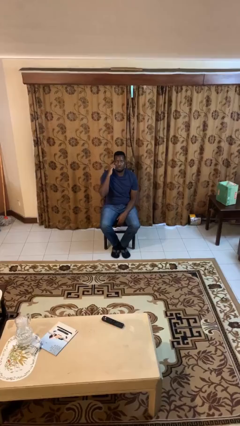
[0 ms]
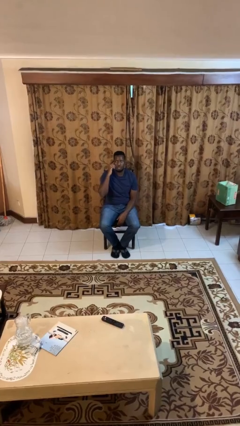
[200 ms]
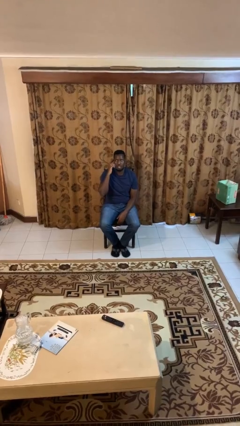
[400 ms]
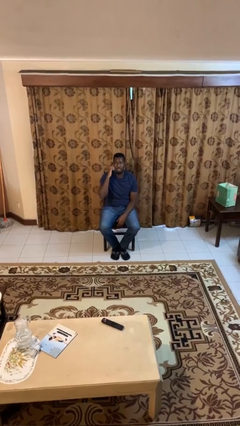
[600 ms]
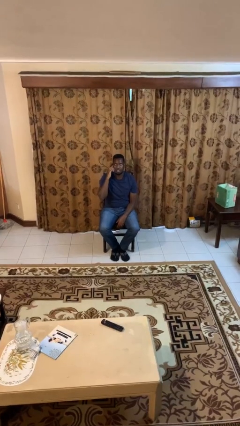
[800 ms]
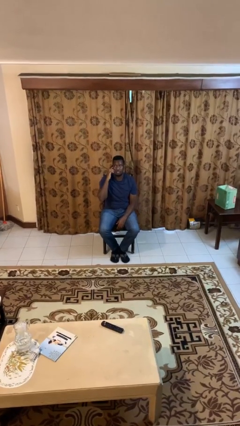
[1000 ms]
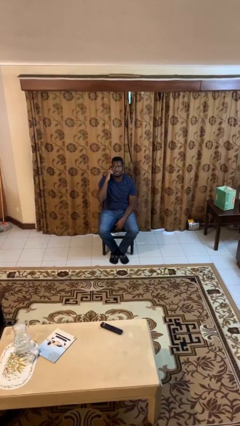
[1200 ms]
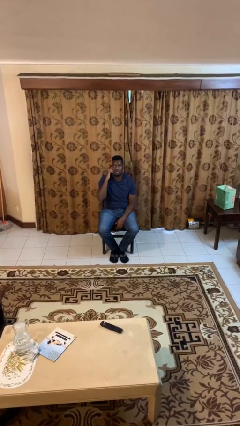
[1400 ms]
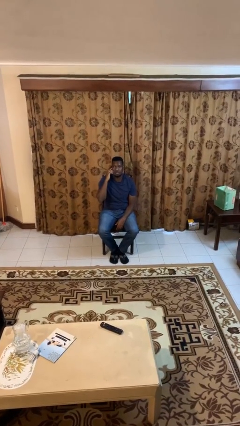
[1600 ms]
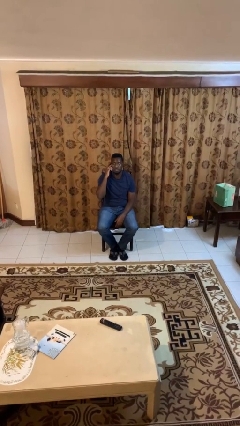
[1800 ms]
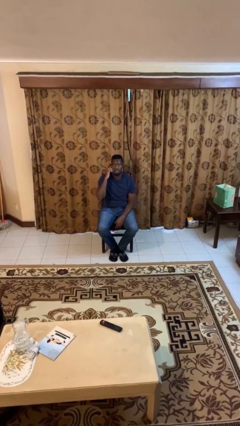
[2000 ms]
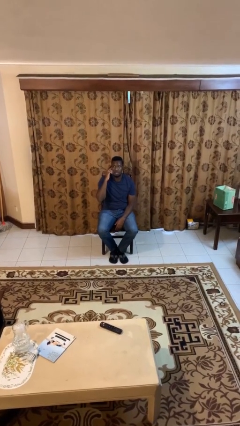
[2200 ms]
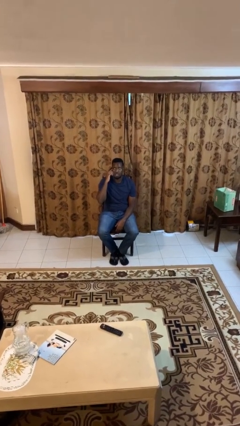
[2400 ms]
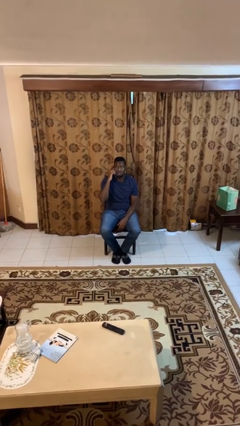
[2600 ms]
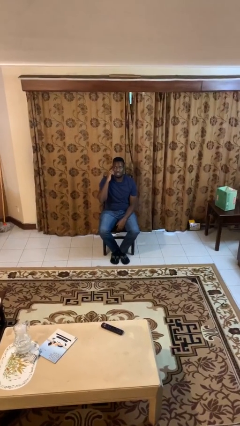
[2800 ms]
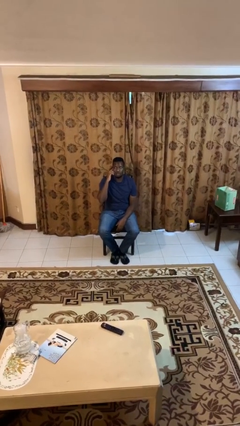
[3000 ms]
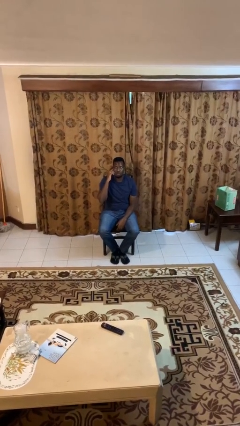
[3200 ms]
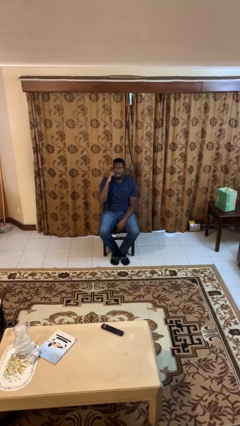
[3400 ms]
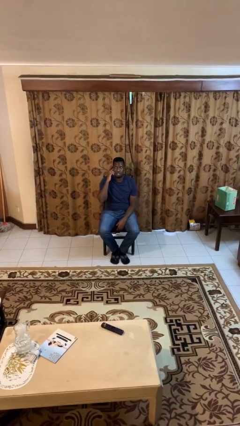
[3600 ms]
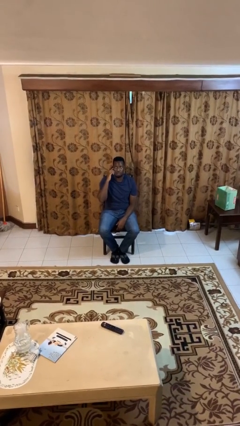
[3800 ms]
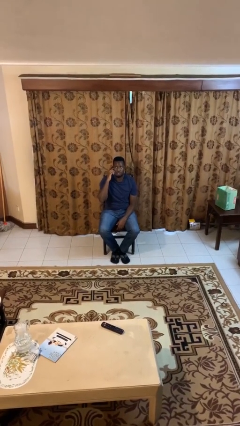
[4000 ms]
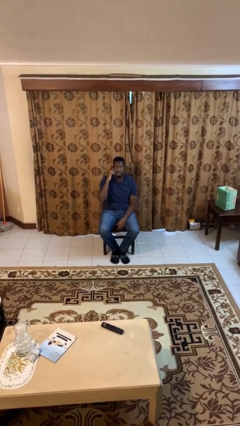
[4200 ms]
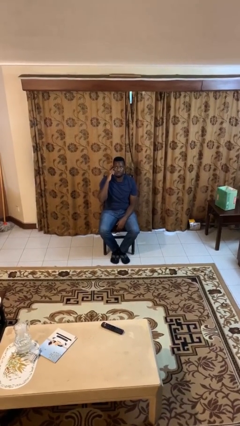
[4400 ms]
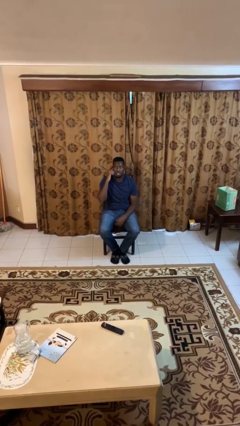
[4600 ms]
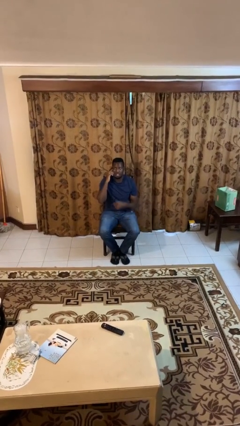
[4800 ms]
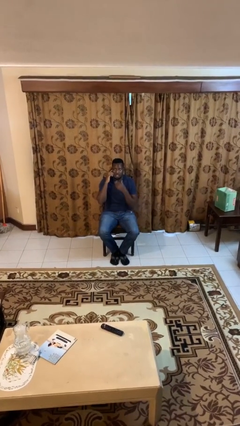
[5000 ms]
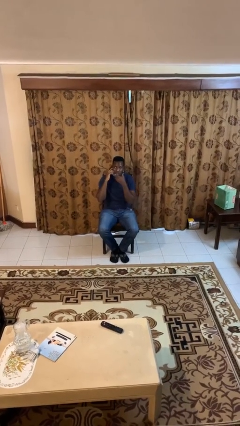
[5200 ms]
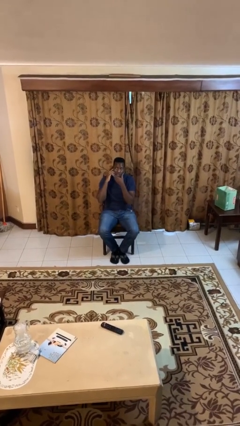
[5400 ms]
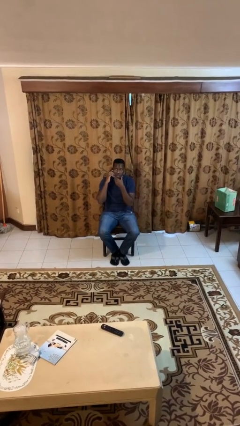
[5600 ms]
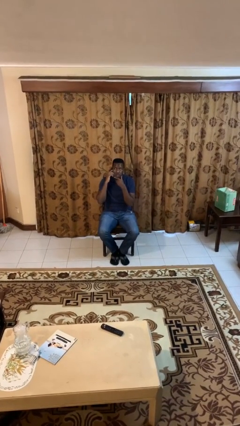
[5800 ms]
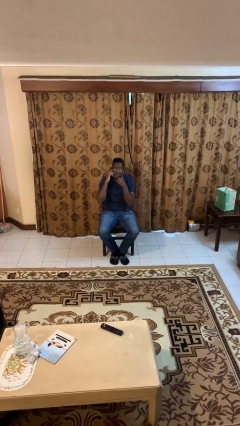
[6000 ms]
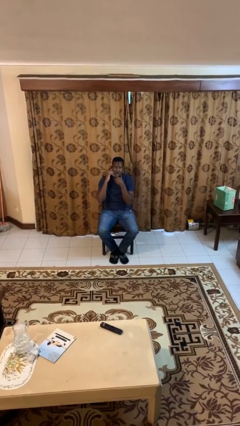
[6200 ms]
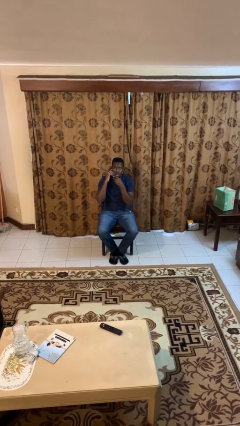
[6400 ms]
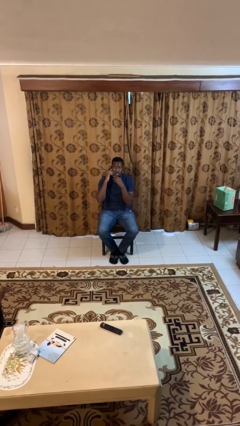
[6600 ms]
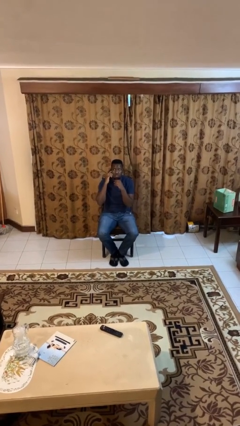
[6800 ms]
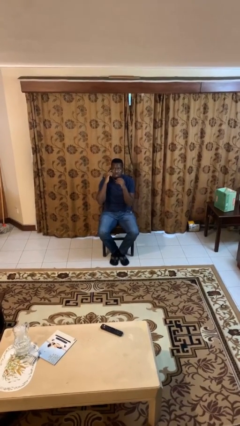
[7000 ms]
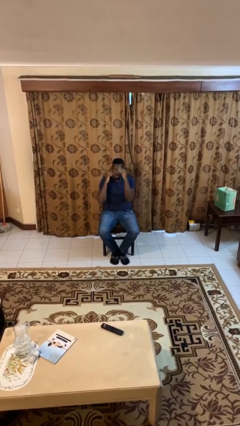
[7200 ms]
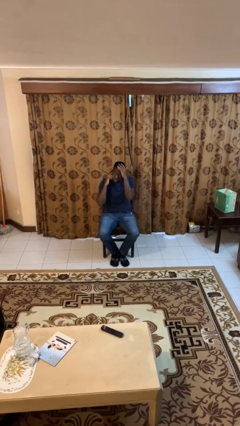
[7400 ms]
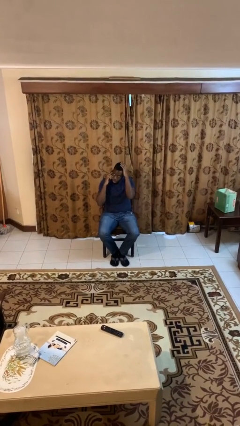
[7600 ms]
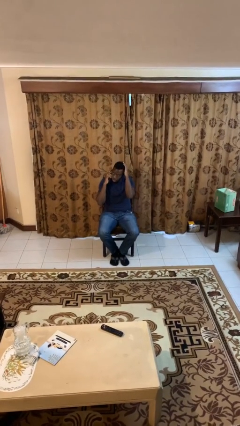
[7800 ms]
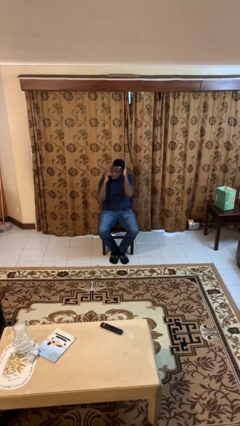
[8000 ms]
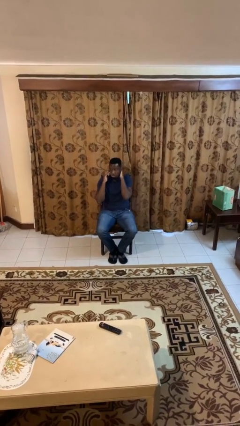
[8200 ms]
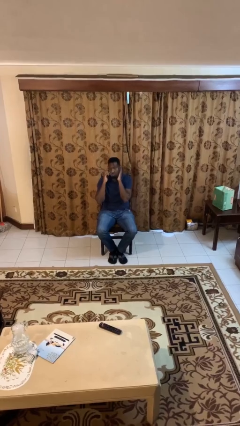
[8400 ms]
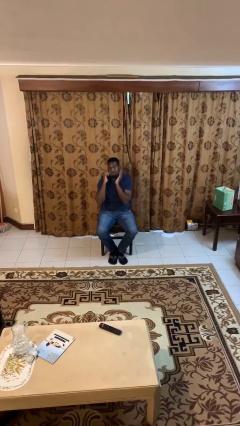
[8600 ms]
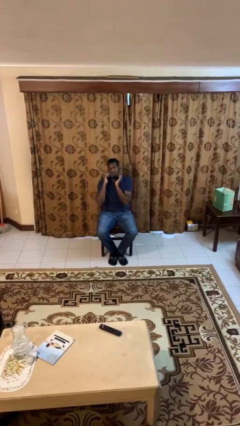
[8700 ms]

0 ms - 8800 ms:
person talks on phone

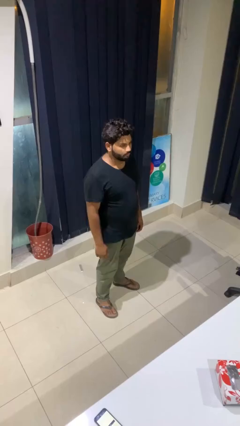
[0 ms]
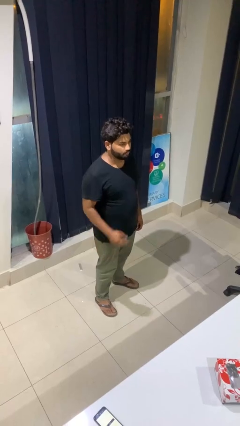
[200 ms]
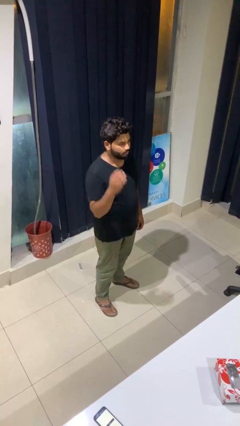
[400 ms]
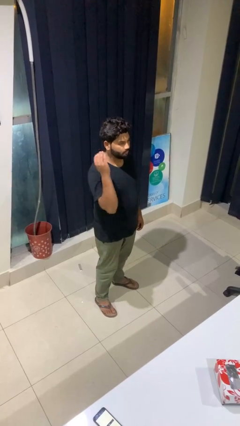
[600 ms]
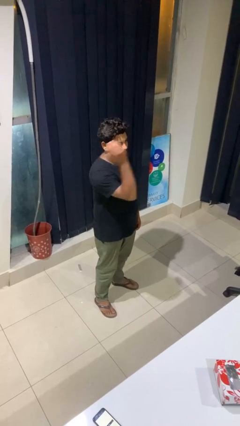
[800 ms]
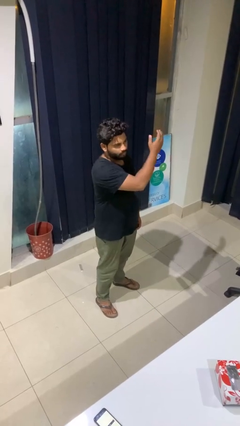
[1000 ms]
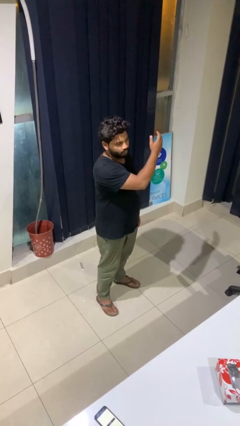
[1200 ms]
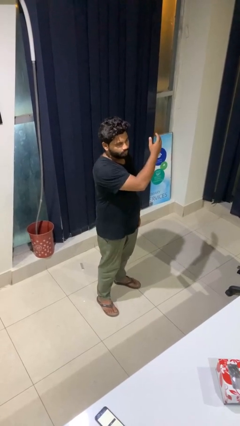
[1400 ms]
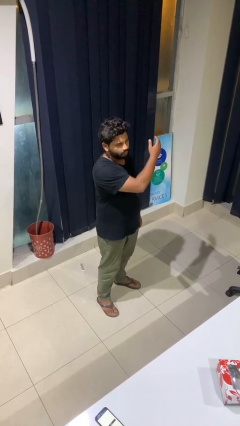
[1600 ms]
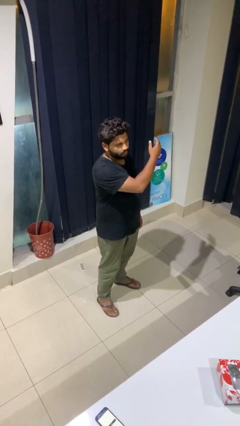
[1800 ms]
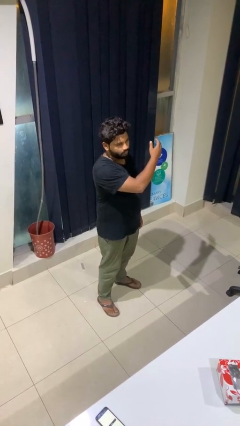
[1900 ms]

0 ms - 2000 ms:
person gestures swipe left

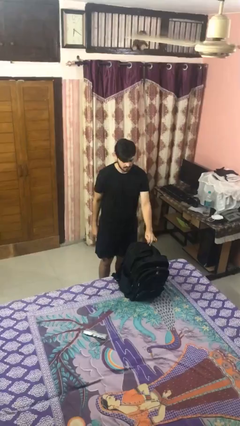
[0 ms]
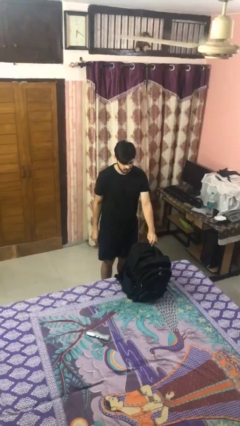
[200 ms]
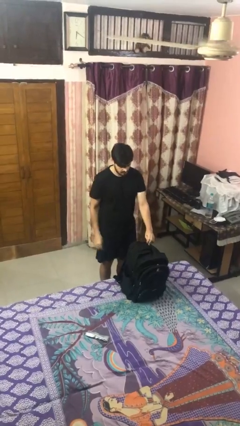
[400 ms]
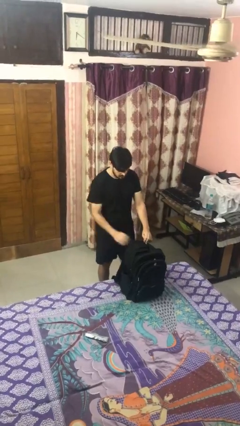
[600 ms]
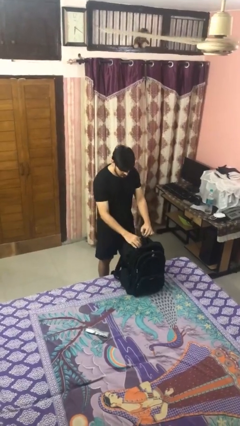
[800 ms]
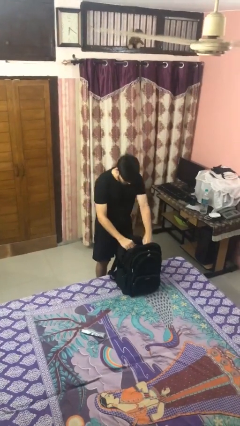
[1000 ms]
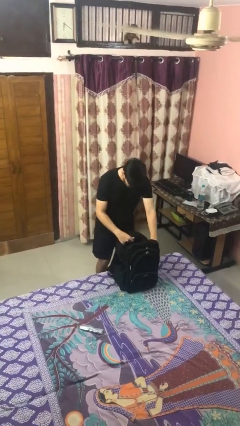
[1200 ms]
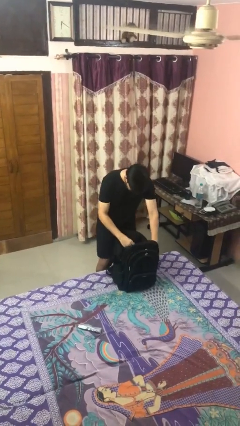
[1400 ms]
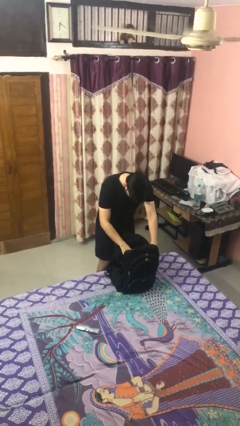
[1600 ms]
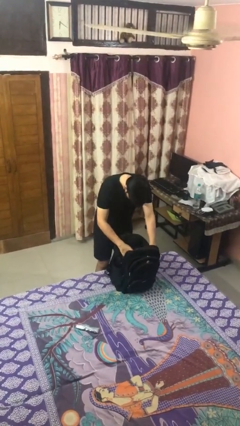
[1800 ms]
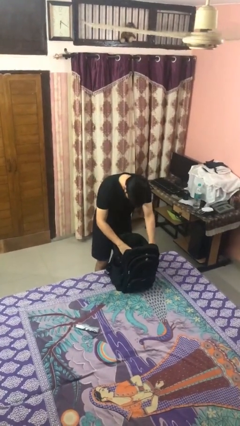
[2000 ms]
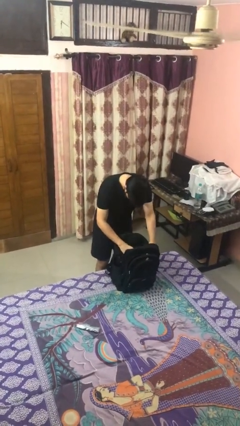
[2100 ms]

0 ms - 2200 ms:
person searches in backpack

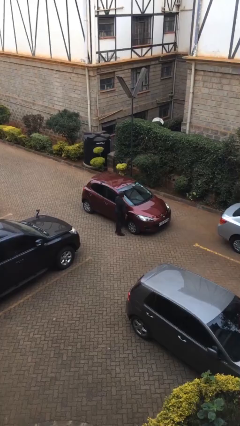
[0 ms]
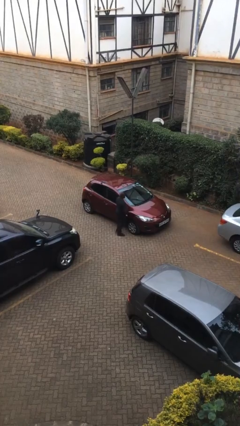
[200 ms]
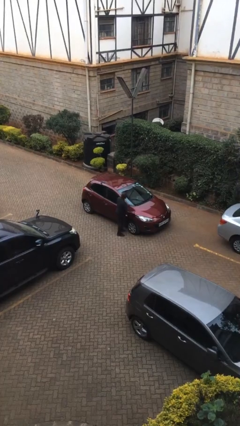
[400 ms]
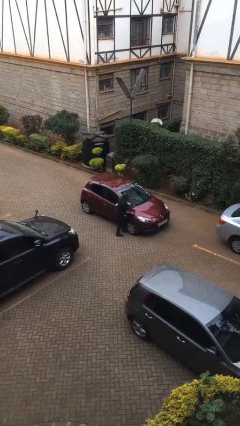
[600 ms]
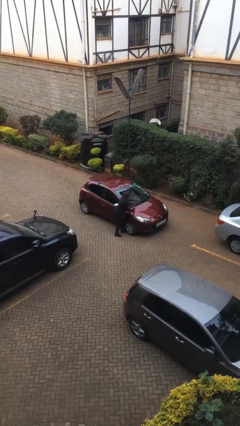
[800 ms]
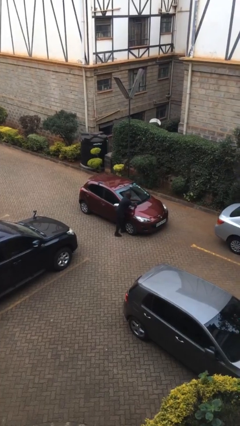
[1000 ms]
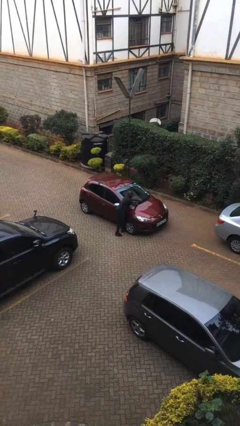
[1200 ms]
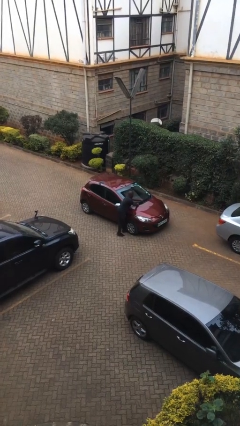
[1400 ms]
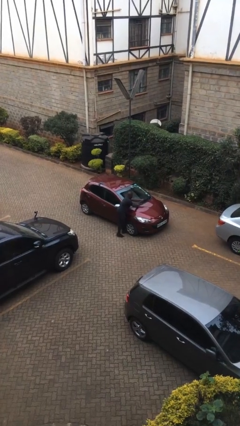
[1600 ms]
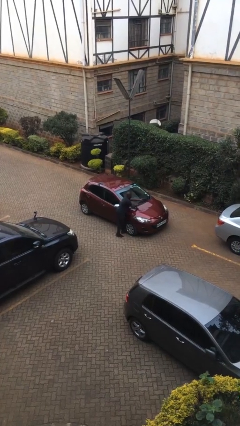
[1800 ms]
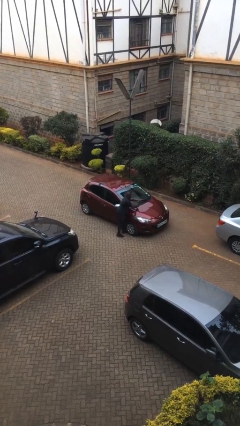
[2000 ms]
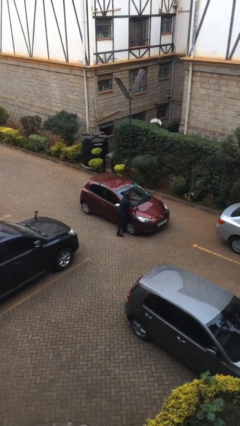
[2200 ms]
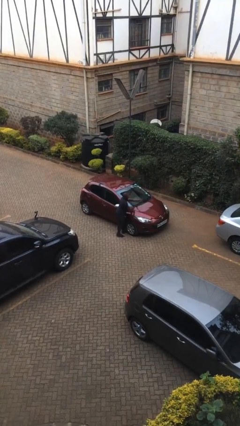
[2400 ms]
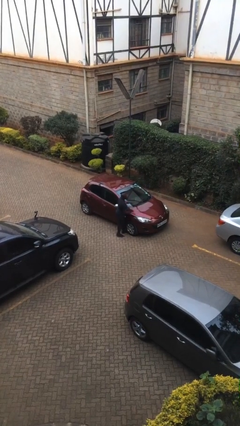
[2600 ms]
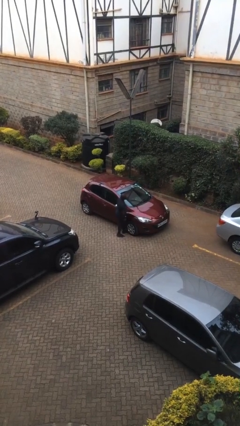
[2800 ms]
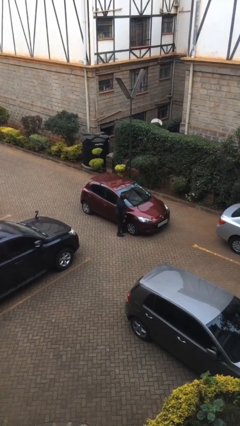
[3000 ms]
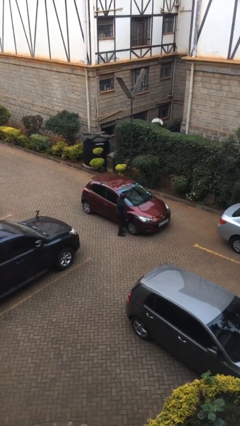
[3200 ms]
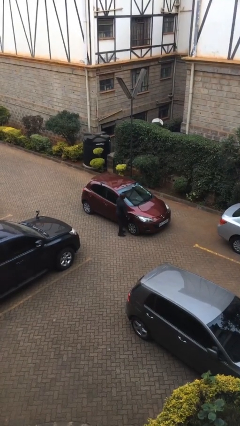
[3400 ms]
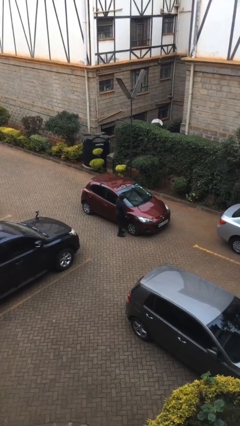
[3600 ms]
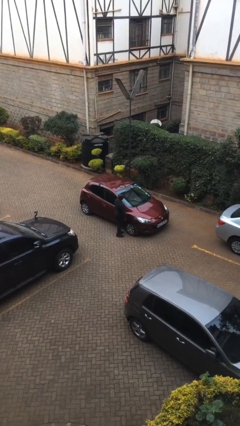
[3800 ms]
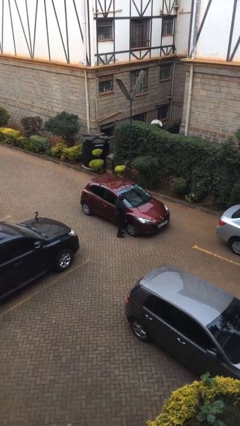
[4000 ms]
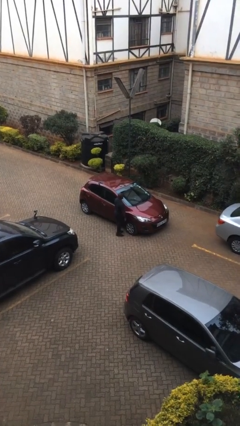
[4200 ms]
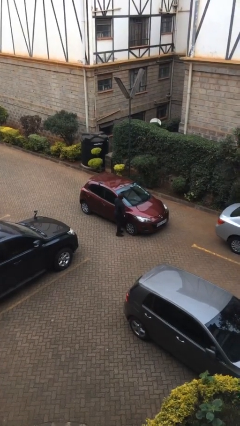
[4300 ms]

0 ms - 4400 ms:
person flips up car wipers
